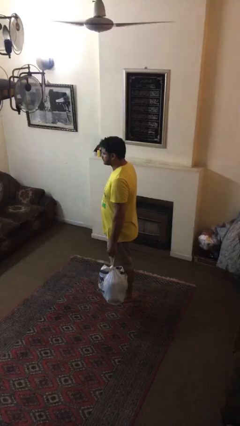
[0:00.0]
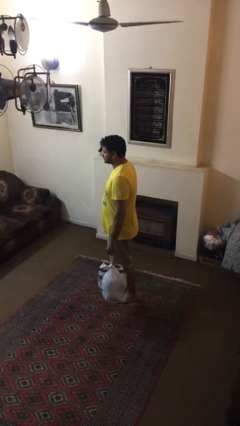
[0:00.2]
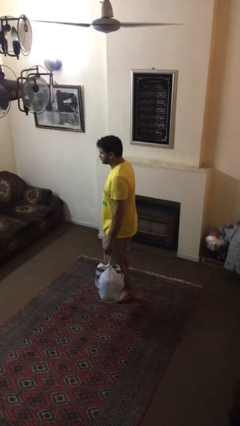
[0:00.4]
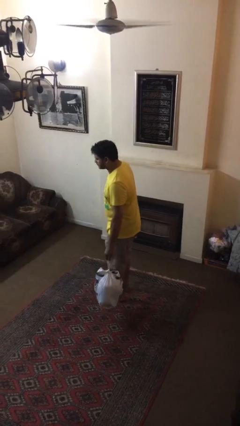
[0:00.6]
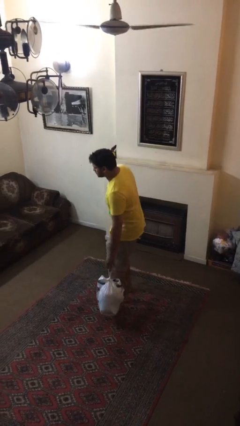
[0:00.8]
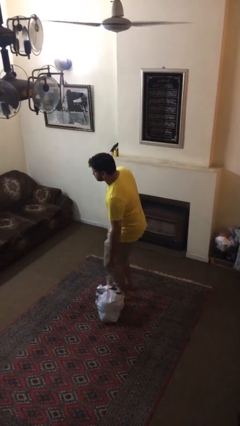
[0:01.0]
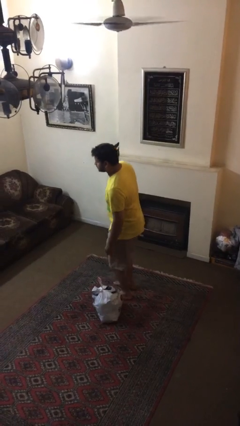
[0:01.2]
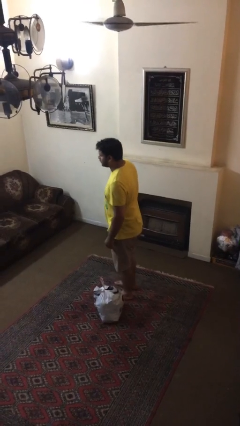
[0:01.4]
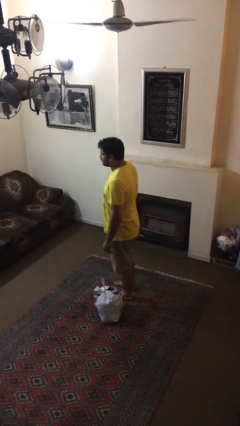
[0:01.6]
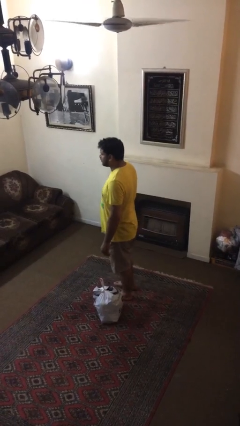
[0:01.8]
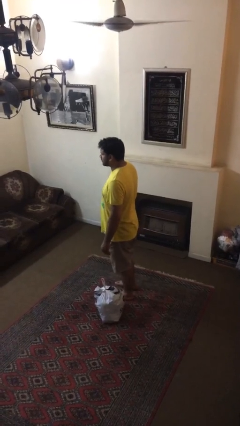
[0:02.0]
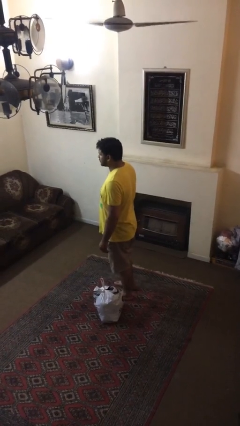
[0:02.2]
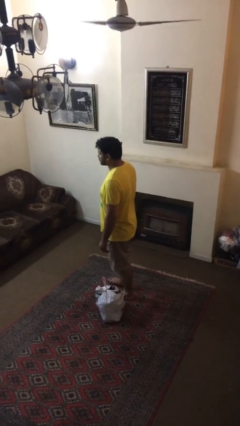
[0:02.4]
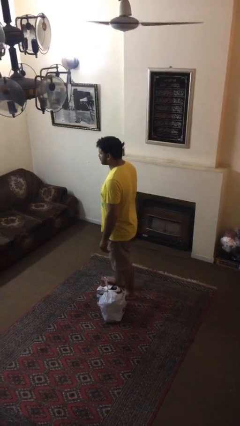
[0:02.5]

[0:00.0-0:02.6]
person puts down object on floor

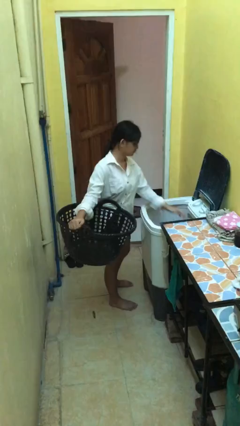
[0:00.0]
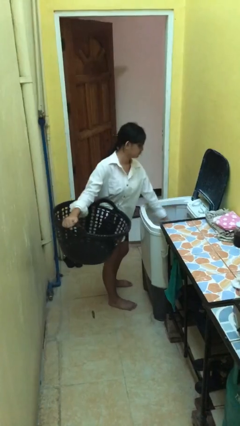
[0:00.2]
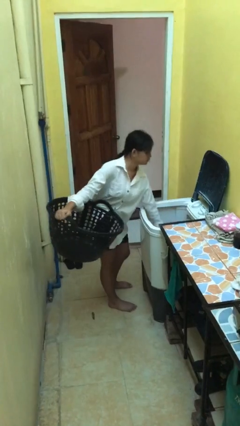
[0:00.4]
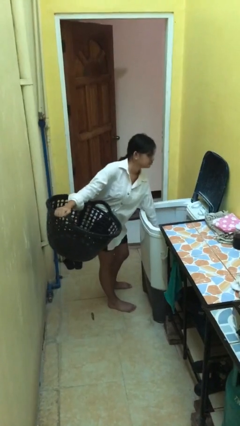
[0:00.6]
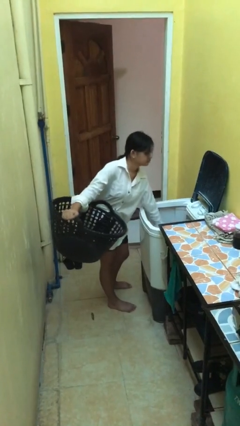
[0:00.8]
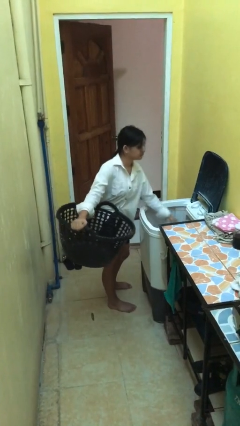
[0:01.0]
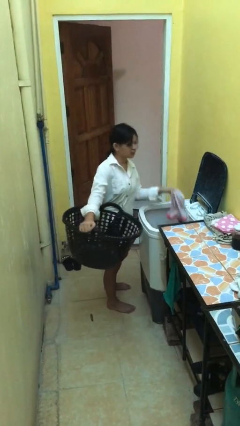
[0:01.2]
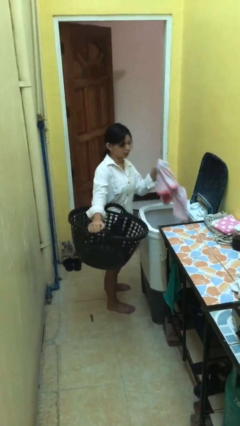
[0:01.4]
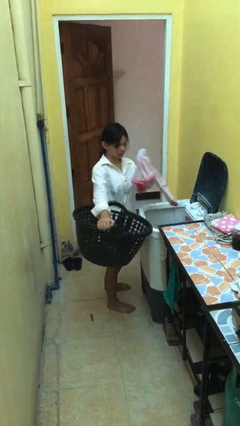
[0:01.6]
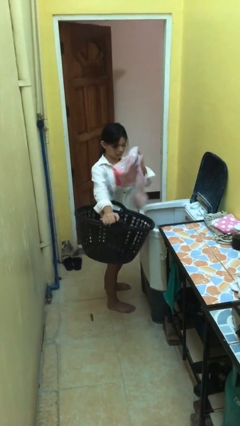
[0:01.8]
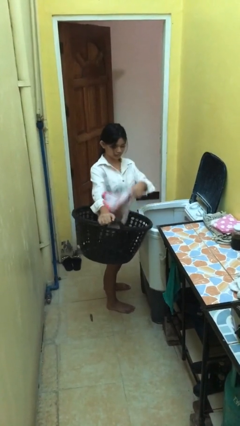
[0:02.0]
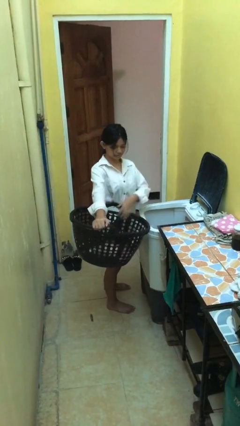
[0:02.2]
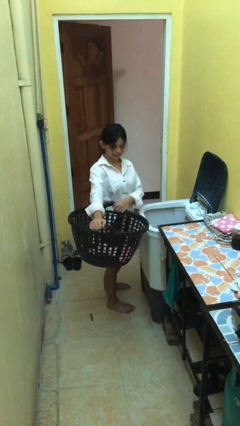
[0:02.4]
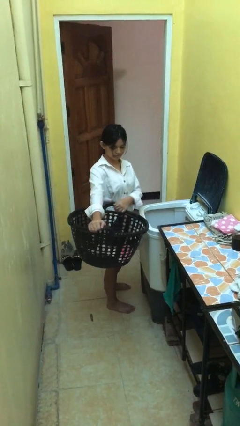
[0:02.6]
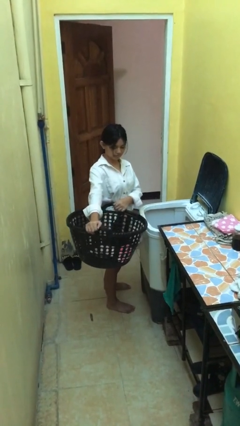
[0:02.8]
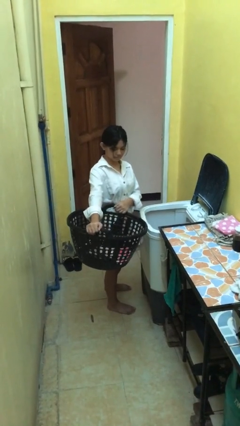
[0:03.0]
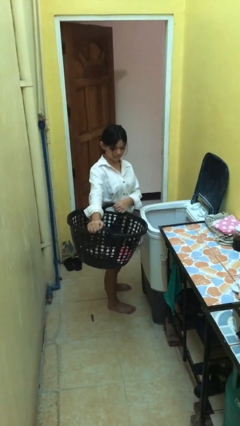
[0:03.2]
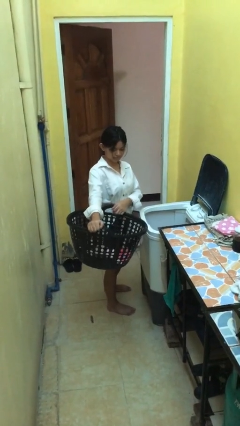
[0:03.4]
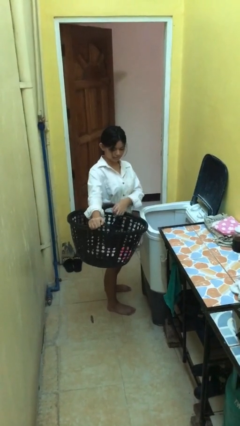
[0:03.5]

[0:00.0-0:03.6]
person loads clotheswasher

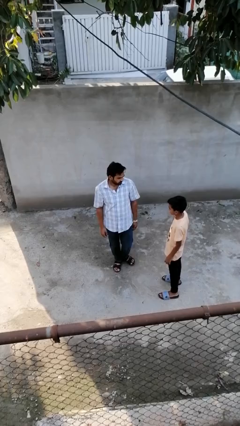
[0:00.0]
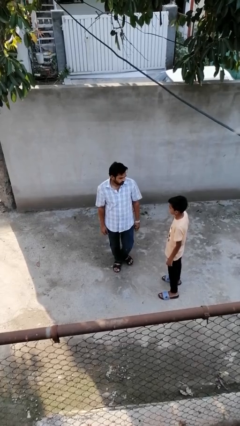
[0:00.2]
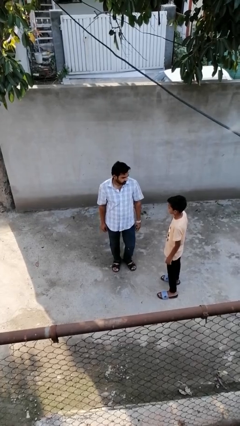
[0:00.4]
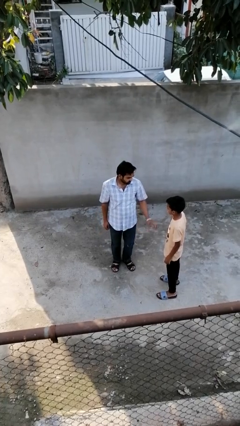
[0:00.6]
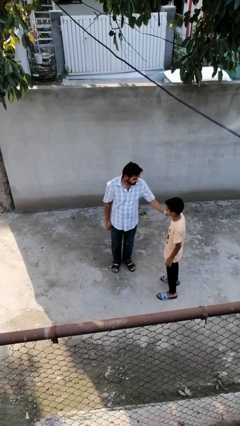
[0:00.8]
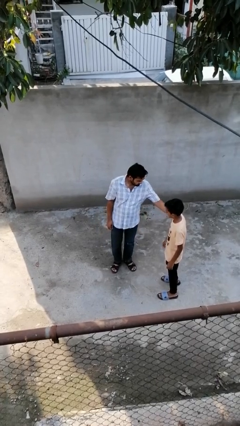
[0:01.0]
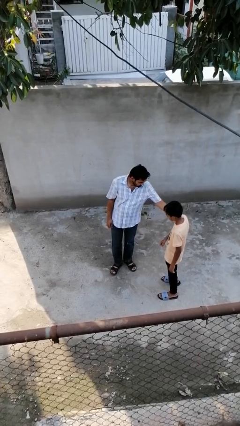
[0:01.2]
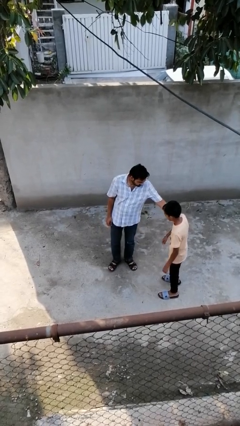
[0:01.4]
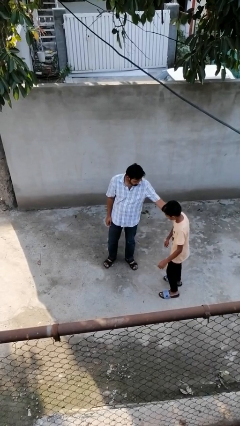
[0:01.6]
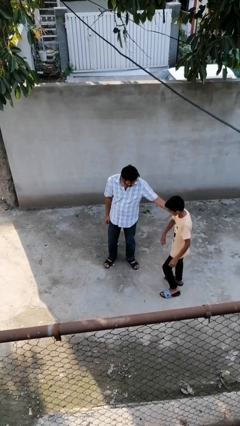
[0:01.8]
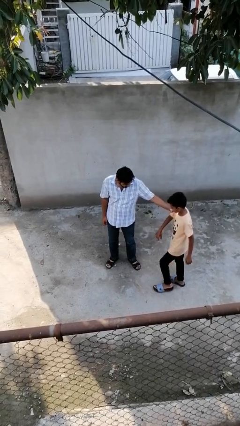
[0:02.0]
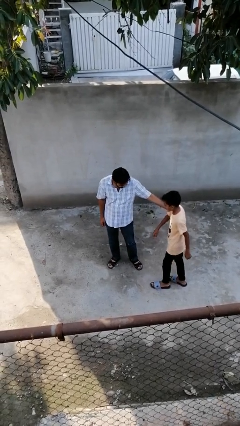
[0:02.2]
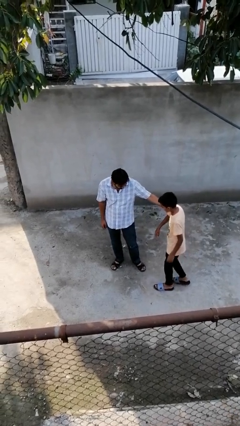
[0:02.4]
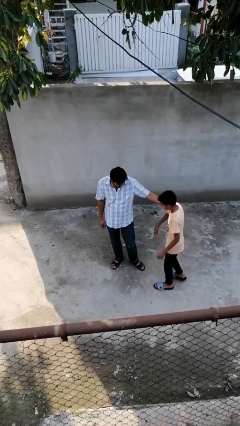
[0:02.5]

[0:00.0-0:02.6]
person grabs person by bicep

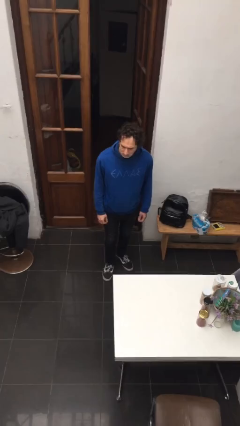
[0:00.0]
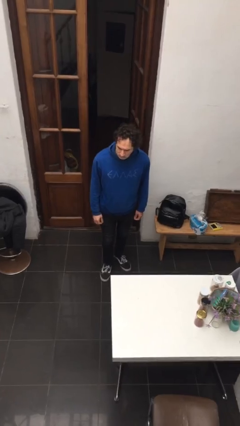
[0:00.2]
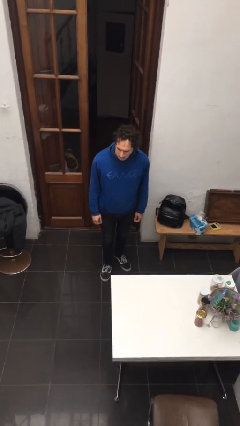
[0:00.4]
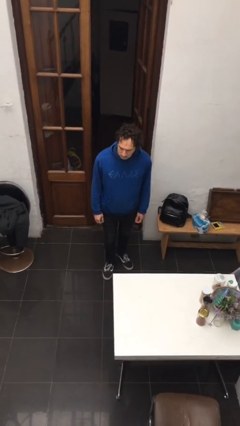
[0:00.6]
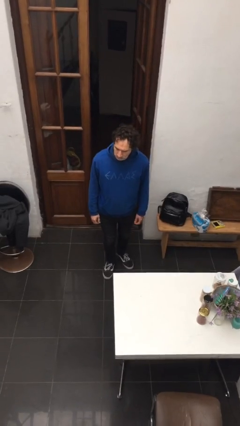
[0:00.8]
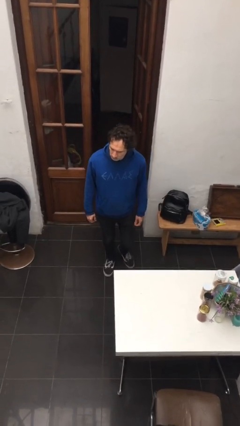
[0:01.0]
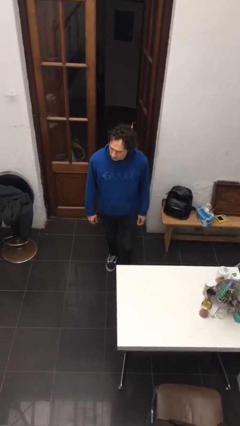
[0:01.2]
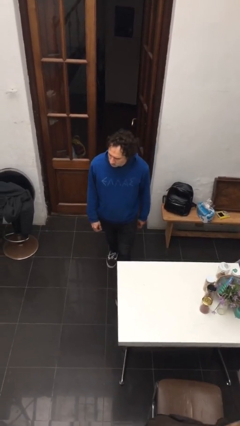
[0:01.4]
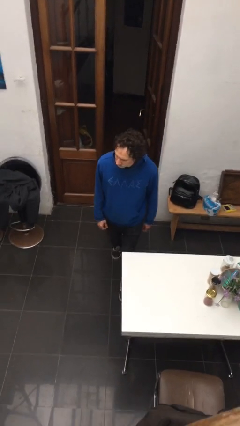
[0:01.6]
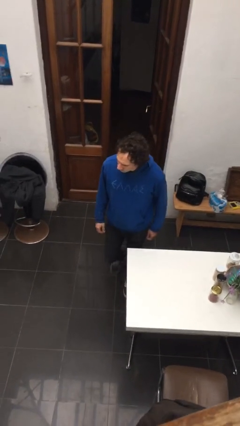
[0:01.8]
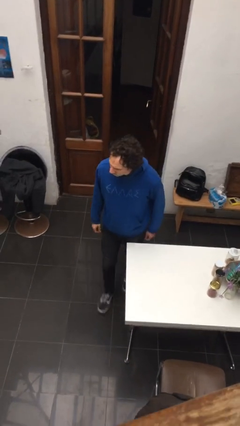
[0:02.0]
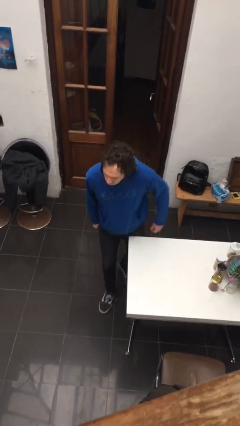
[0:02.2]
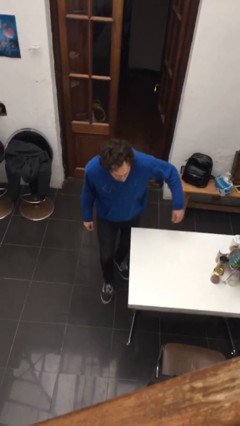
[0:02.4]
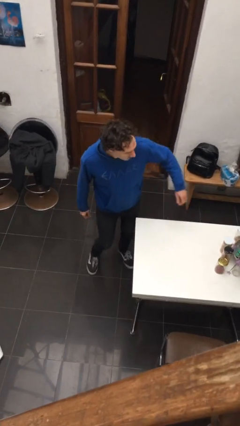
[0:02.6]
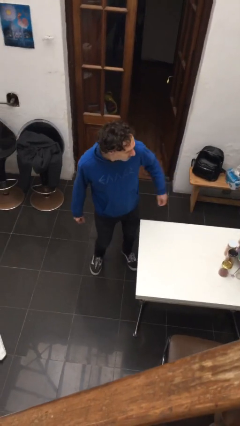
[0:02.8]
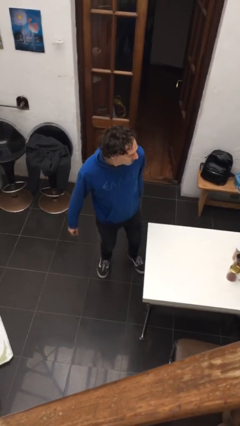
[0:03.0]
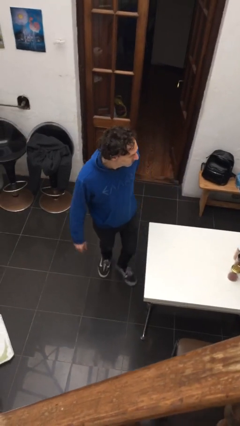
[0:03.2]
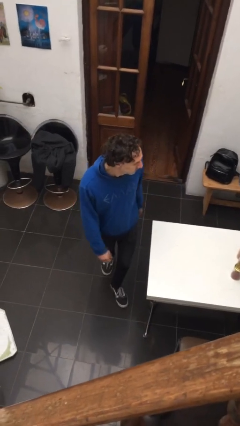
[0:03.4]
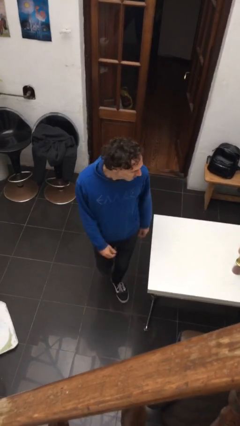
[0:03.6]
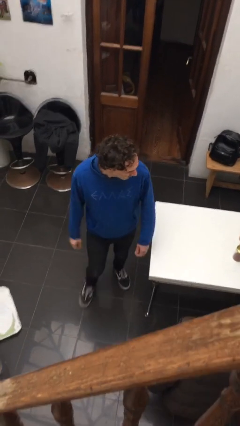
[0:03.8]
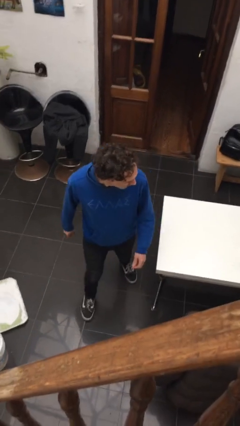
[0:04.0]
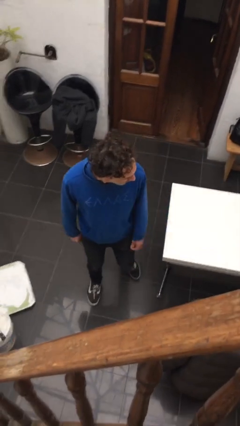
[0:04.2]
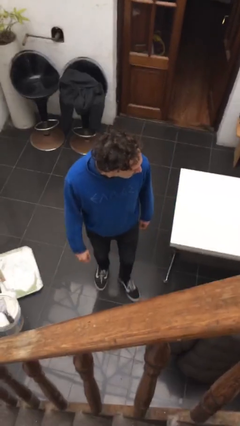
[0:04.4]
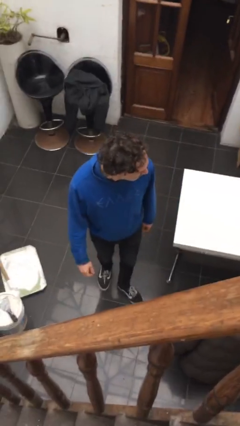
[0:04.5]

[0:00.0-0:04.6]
person bumps into table

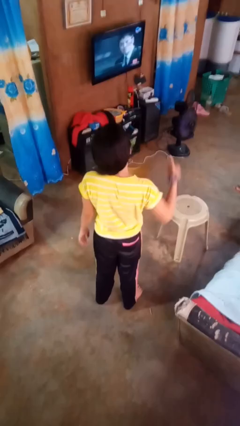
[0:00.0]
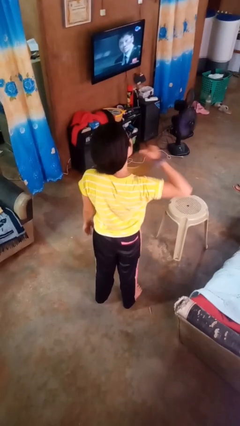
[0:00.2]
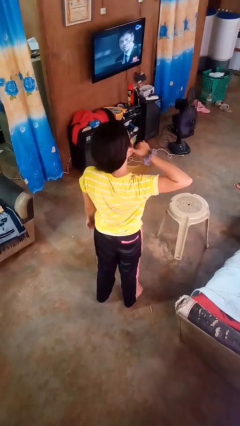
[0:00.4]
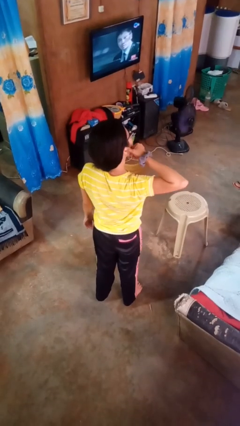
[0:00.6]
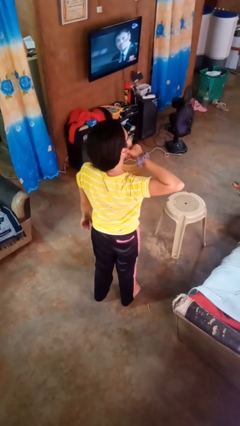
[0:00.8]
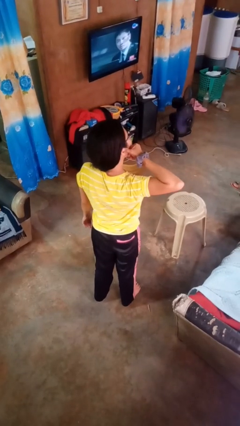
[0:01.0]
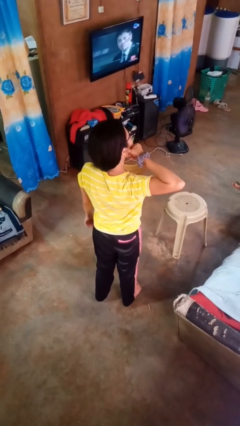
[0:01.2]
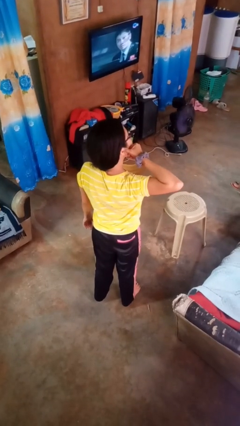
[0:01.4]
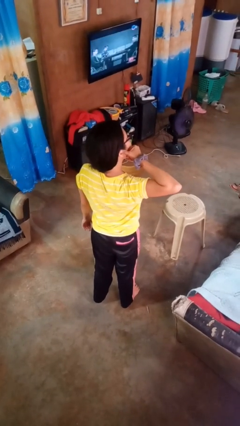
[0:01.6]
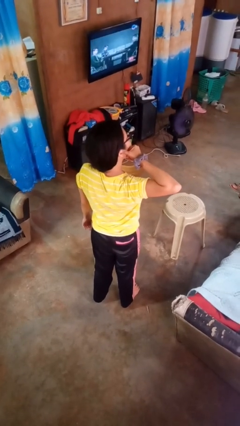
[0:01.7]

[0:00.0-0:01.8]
person gestures call me

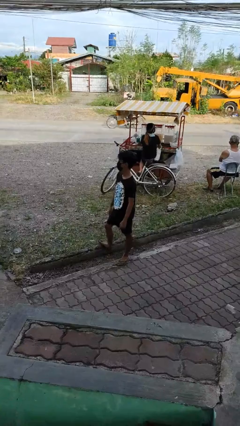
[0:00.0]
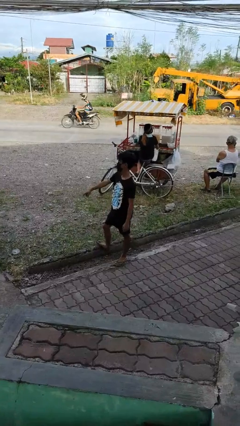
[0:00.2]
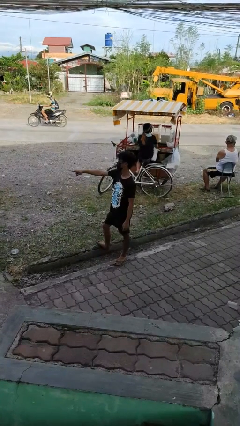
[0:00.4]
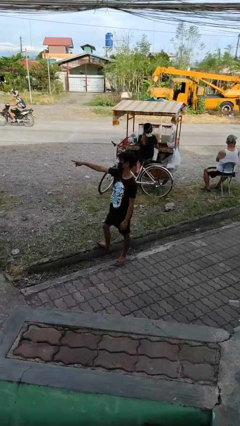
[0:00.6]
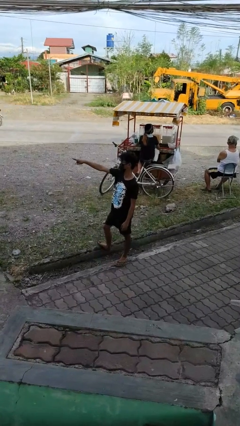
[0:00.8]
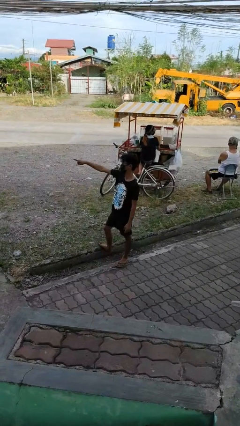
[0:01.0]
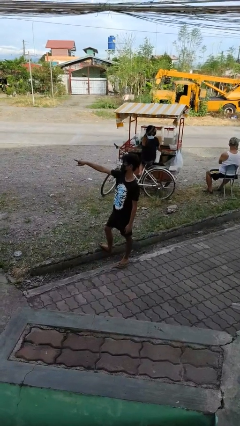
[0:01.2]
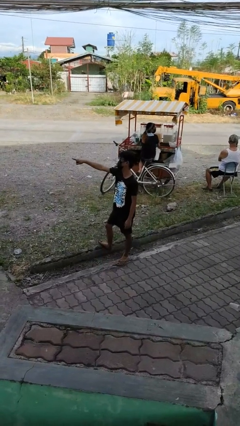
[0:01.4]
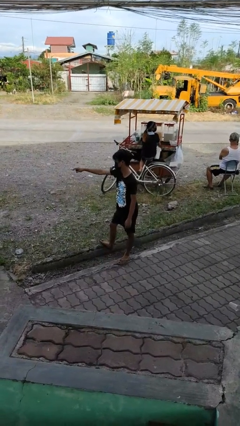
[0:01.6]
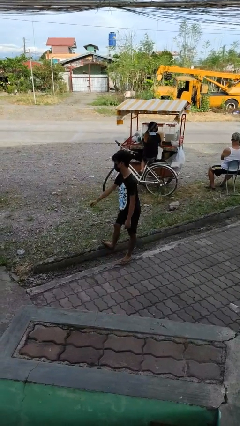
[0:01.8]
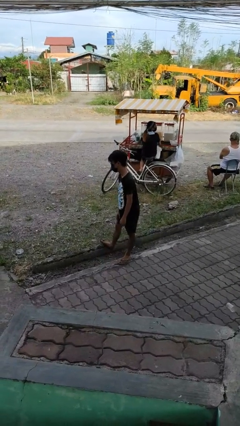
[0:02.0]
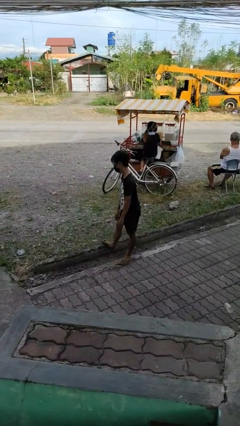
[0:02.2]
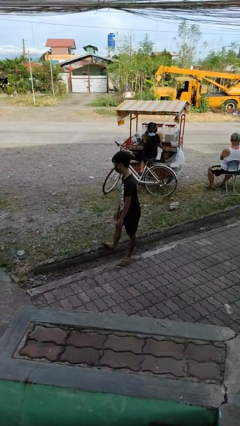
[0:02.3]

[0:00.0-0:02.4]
person points at person
